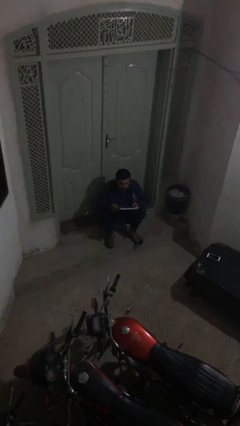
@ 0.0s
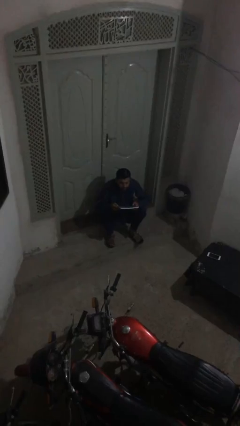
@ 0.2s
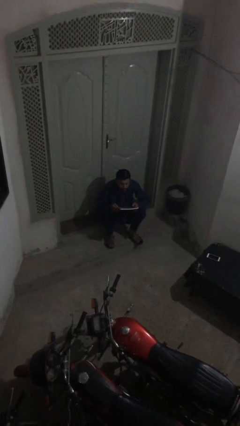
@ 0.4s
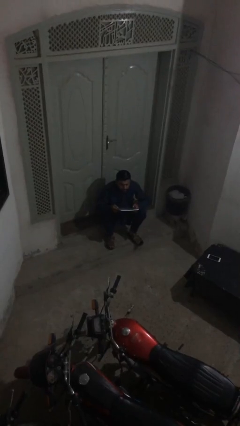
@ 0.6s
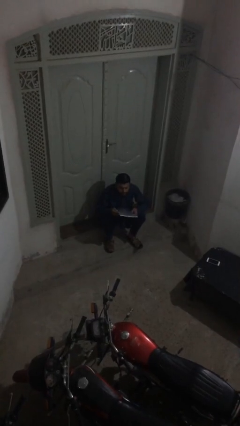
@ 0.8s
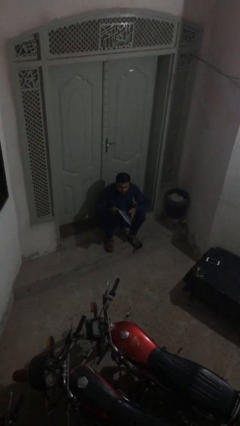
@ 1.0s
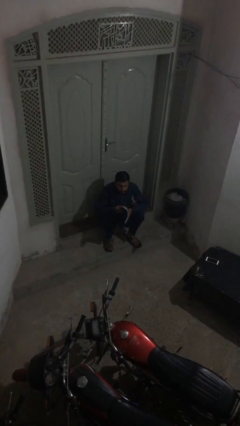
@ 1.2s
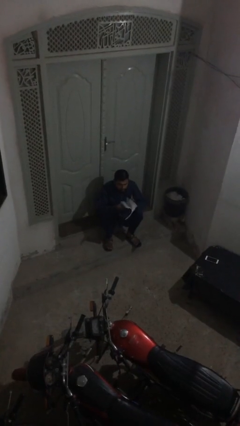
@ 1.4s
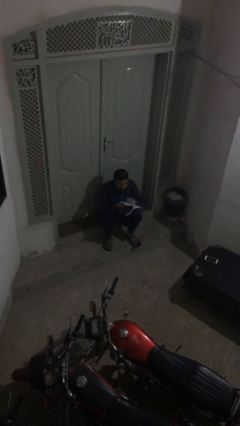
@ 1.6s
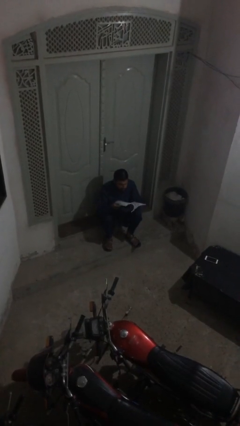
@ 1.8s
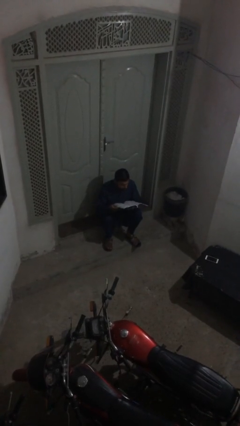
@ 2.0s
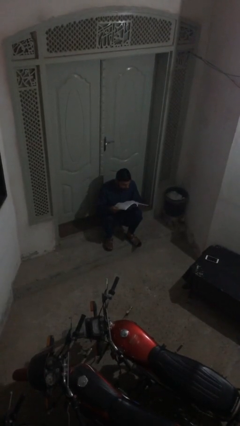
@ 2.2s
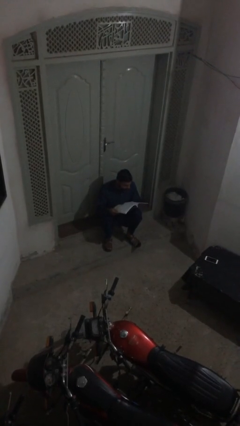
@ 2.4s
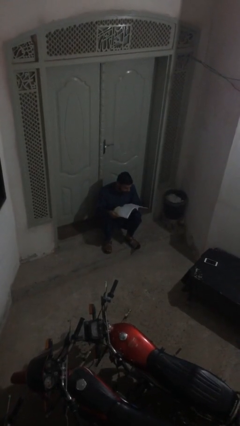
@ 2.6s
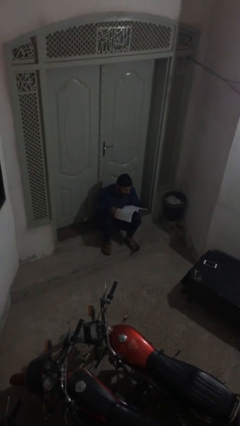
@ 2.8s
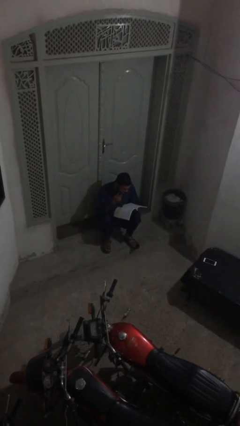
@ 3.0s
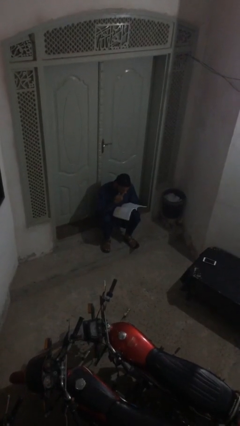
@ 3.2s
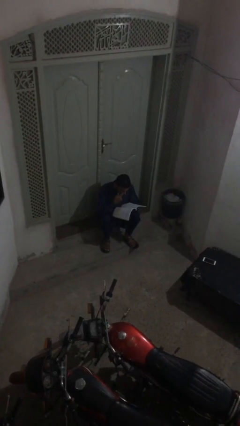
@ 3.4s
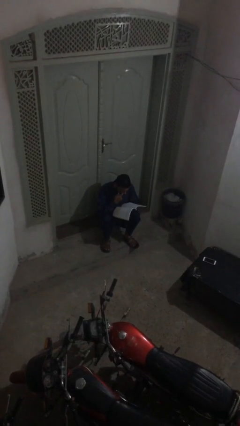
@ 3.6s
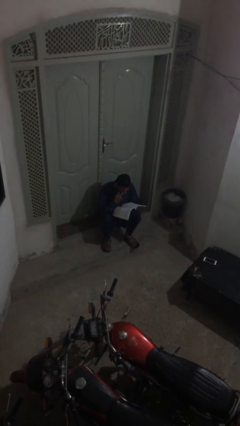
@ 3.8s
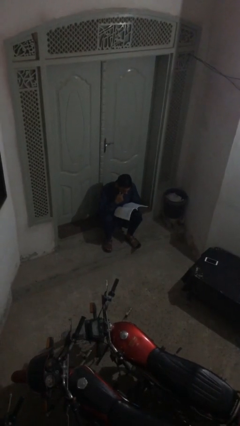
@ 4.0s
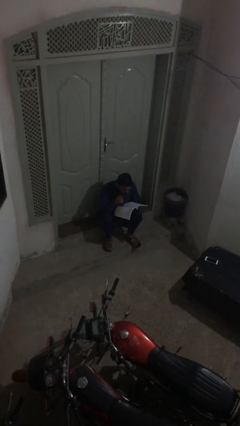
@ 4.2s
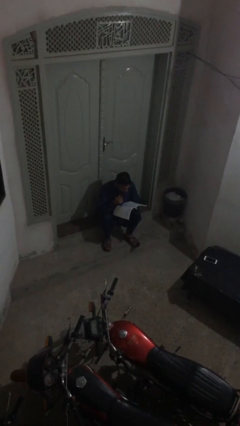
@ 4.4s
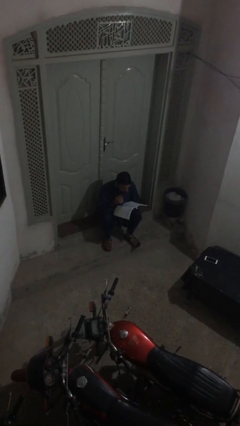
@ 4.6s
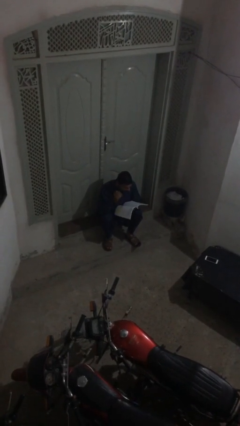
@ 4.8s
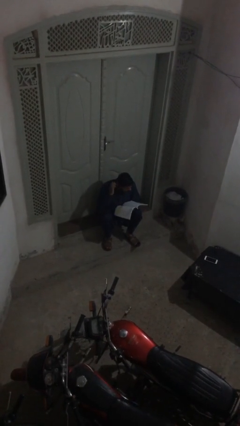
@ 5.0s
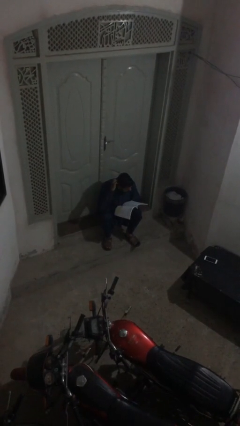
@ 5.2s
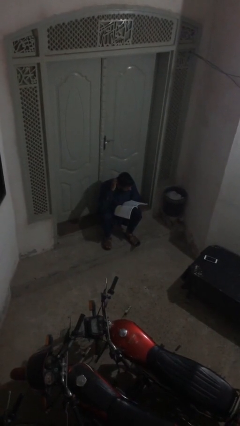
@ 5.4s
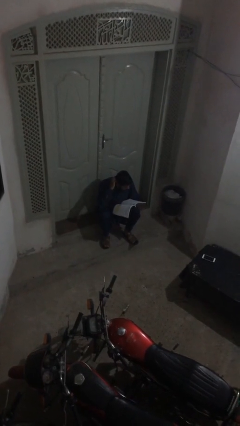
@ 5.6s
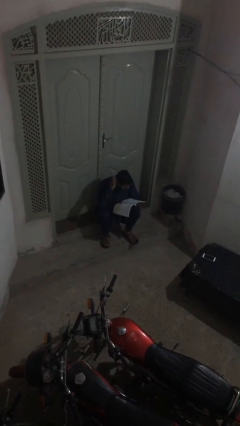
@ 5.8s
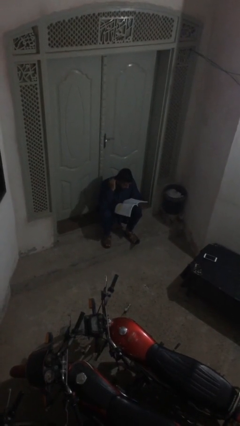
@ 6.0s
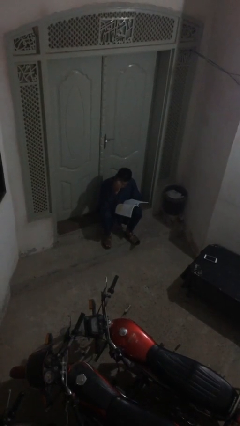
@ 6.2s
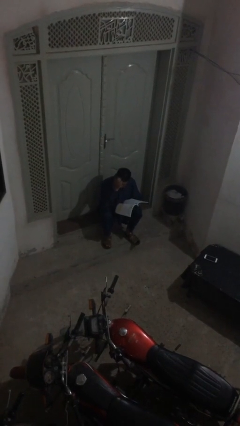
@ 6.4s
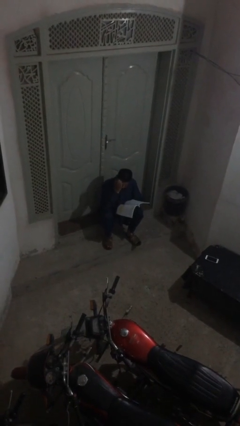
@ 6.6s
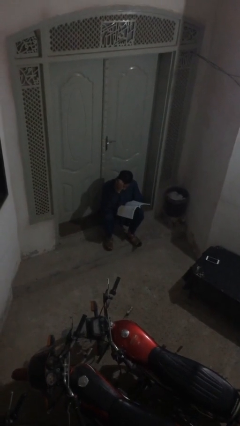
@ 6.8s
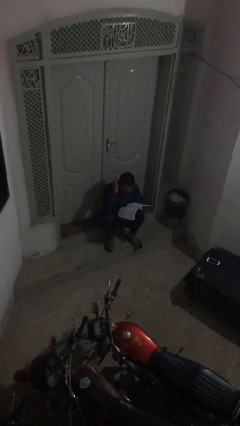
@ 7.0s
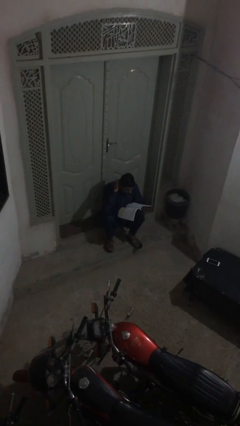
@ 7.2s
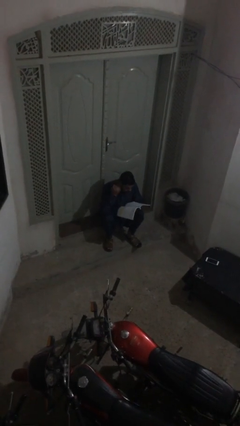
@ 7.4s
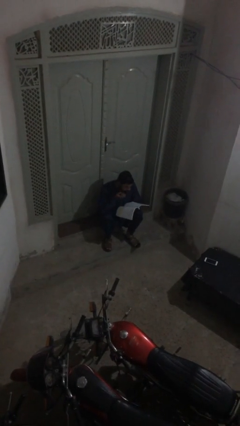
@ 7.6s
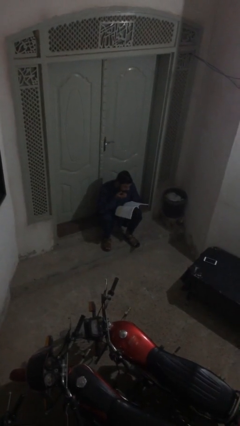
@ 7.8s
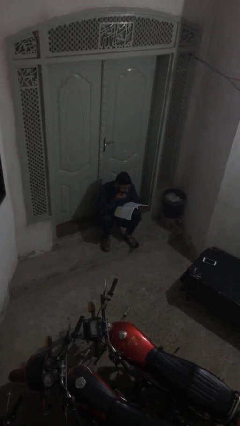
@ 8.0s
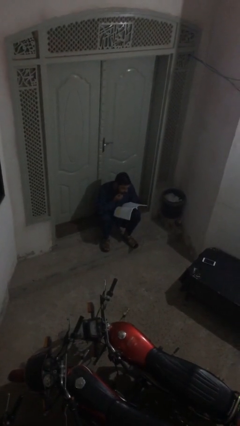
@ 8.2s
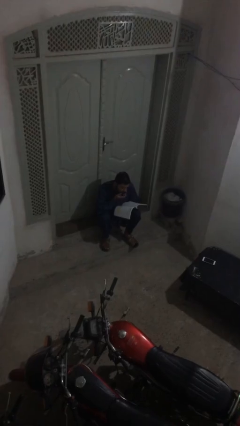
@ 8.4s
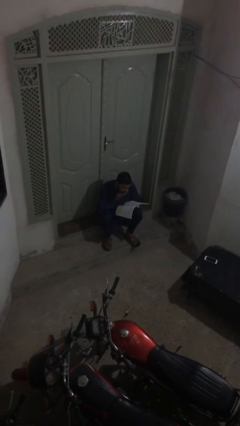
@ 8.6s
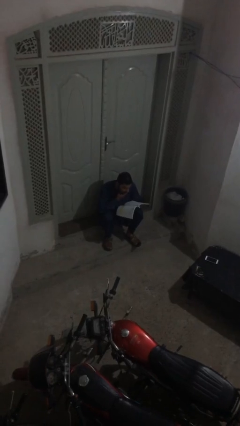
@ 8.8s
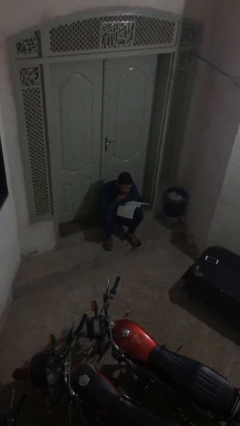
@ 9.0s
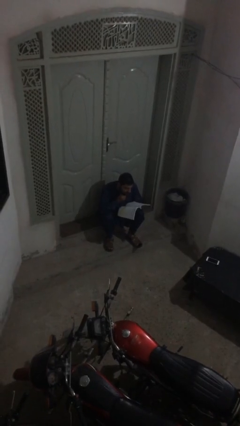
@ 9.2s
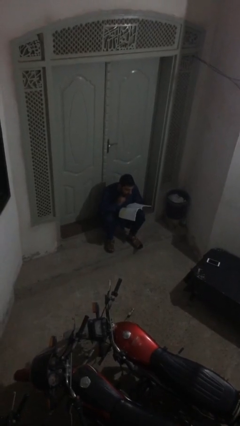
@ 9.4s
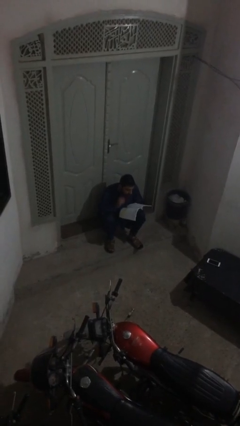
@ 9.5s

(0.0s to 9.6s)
person reads document

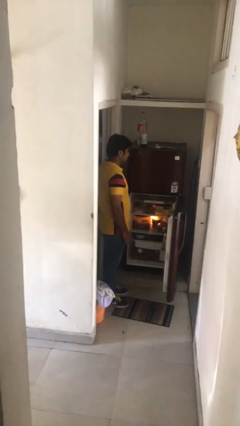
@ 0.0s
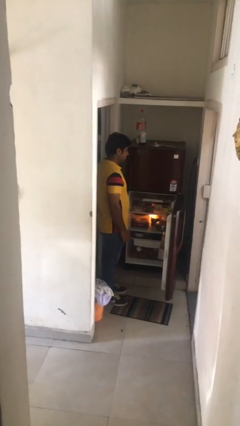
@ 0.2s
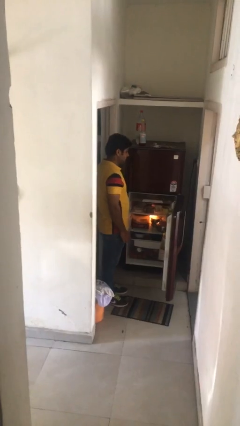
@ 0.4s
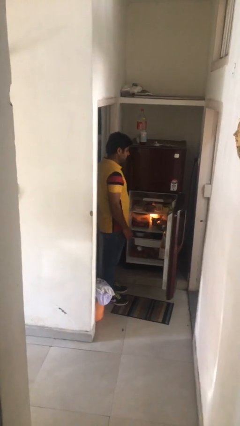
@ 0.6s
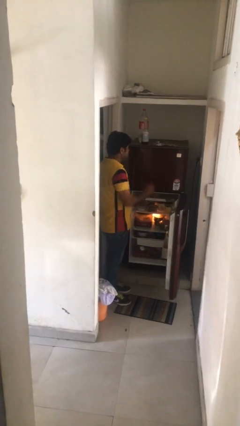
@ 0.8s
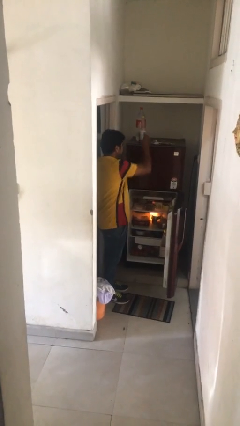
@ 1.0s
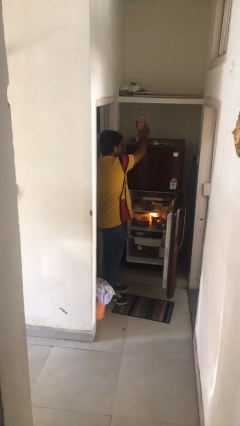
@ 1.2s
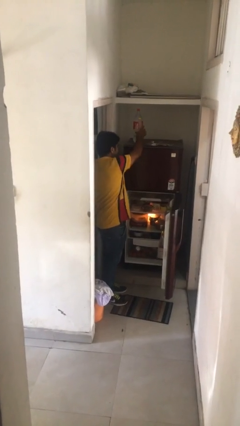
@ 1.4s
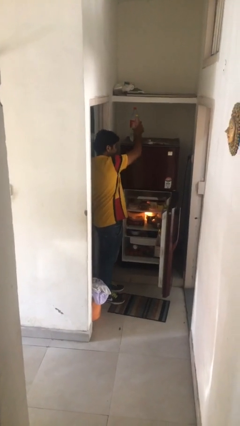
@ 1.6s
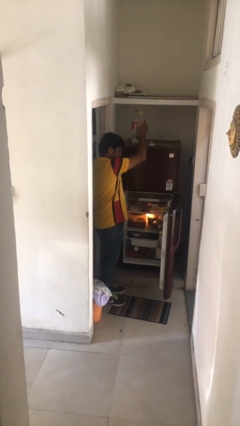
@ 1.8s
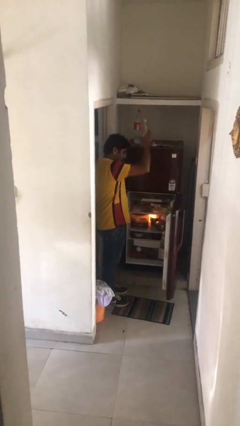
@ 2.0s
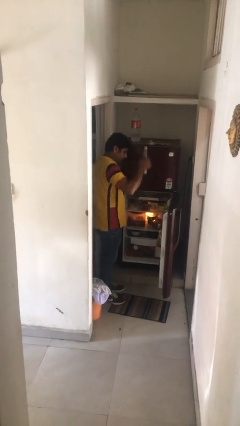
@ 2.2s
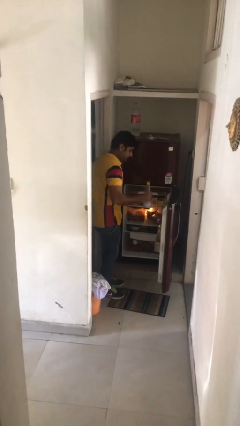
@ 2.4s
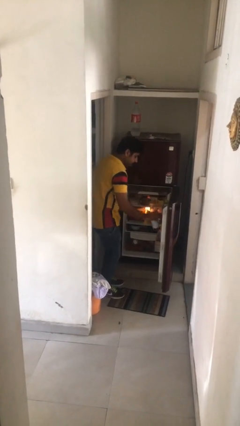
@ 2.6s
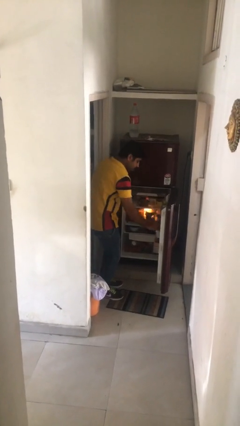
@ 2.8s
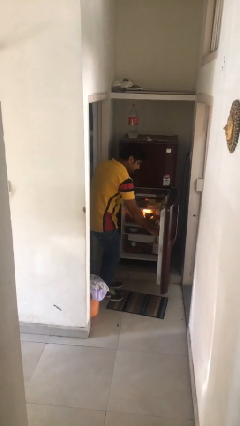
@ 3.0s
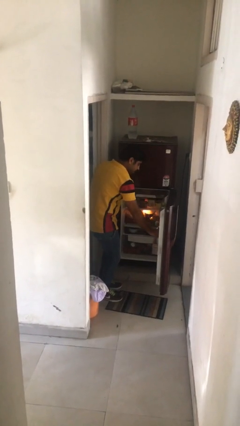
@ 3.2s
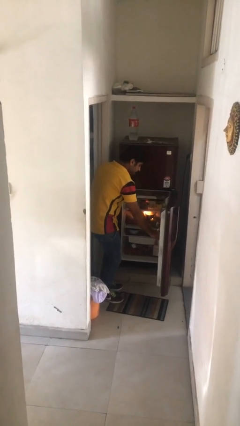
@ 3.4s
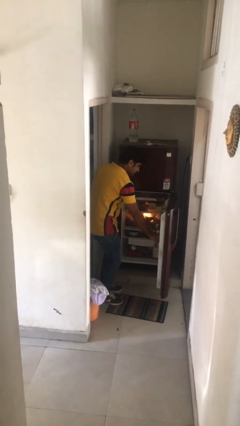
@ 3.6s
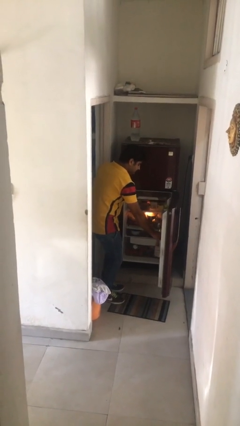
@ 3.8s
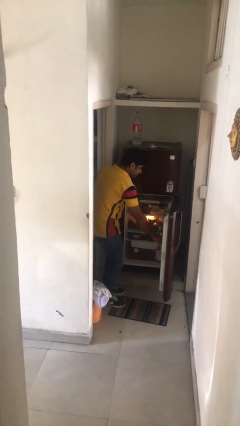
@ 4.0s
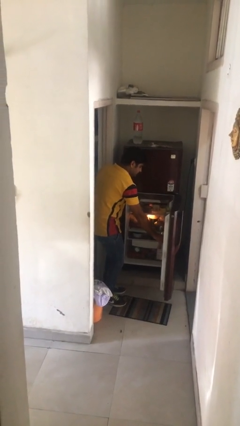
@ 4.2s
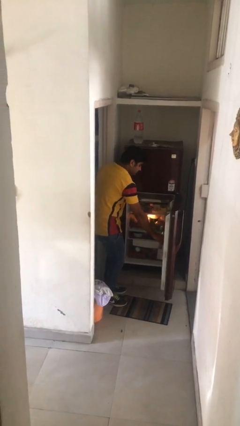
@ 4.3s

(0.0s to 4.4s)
person loads groceries into refrigerator

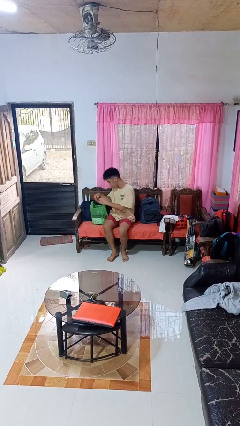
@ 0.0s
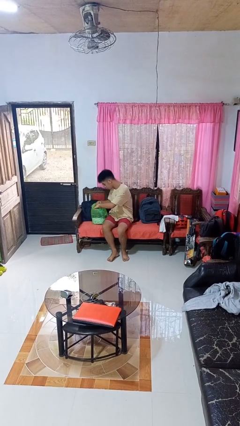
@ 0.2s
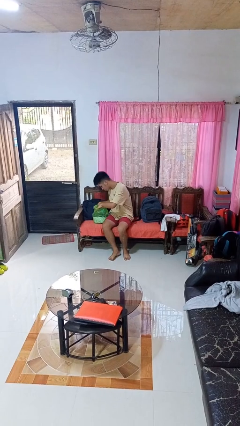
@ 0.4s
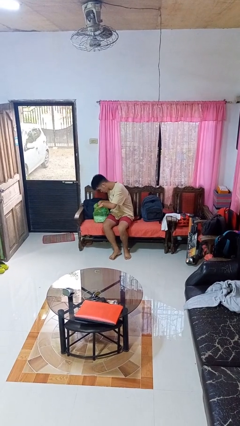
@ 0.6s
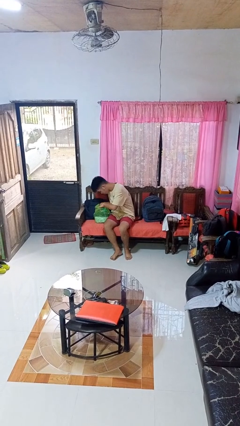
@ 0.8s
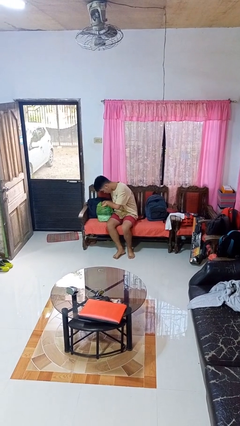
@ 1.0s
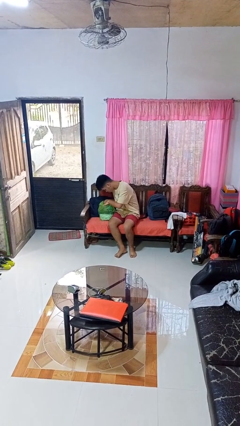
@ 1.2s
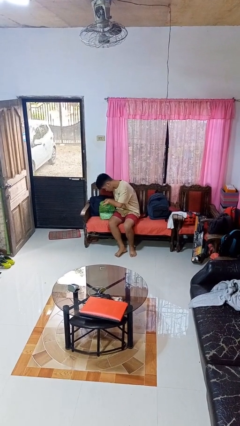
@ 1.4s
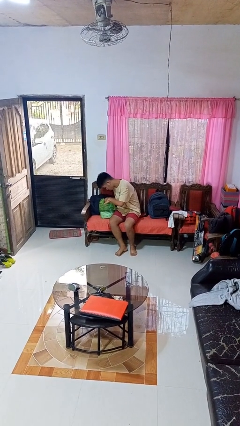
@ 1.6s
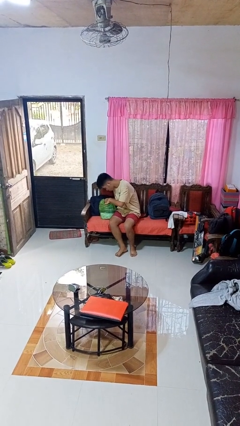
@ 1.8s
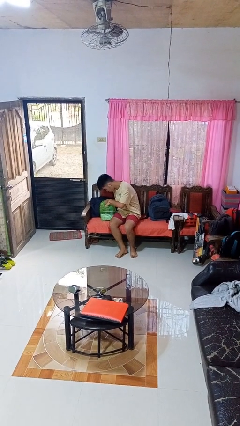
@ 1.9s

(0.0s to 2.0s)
person searches in bag

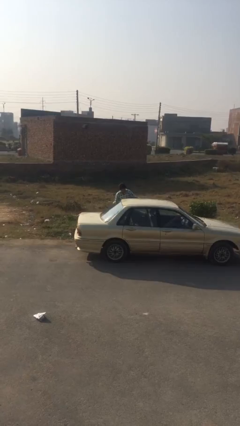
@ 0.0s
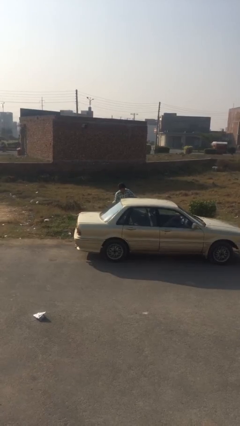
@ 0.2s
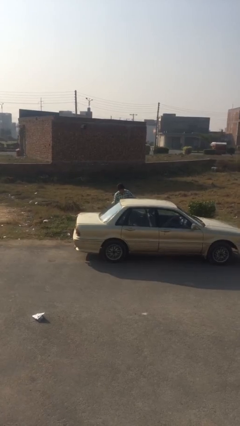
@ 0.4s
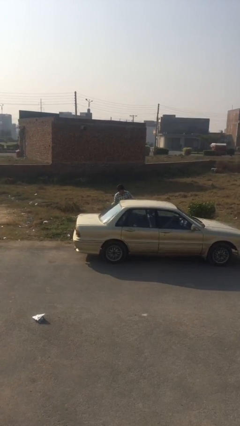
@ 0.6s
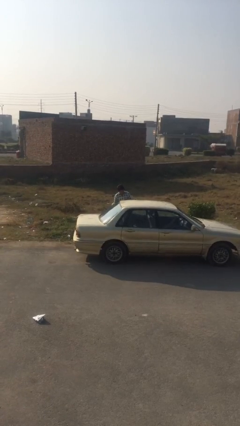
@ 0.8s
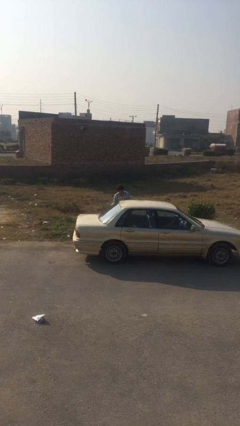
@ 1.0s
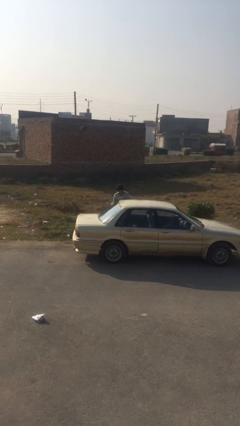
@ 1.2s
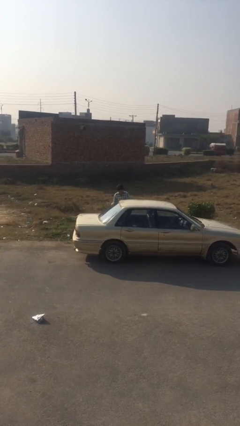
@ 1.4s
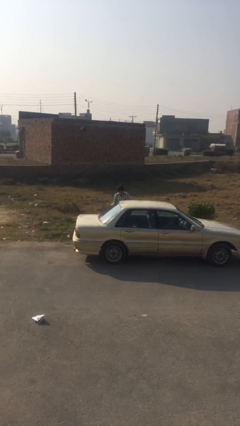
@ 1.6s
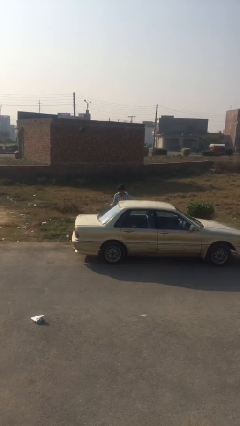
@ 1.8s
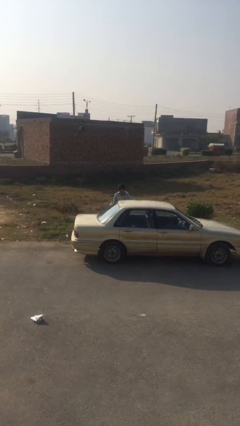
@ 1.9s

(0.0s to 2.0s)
person closes car door
